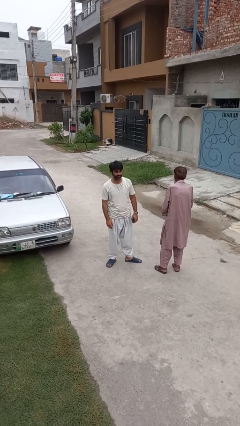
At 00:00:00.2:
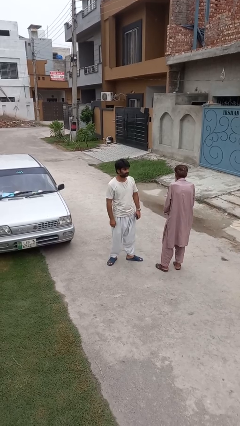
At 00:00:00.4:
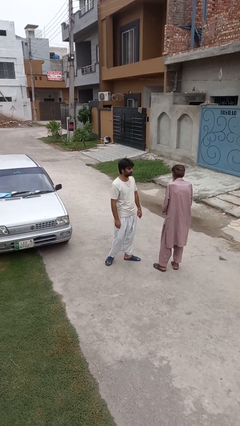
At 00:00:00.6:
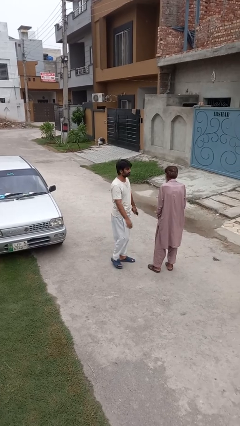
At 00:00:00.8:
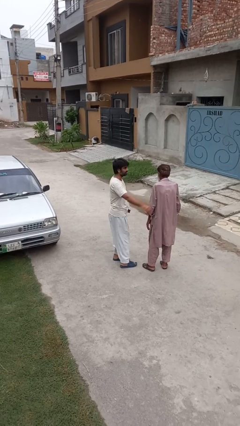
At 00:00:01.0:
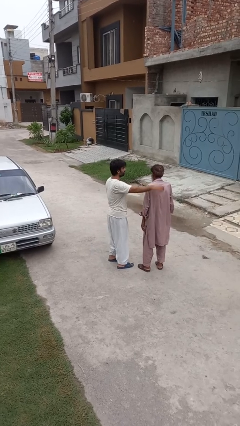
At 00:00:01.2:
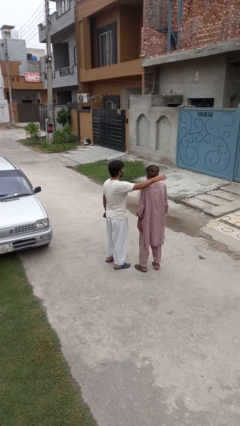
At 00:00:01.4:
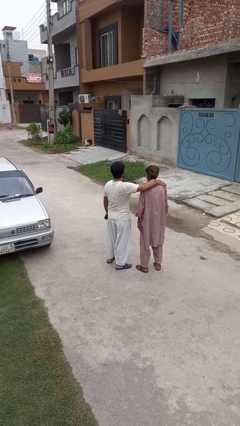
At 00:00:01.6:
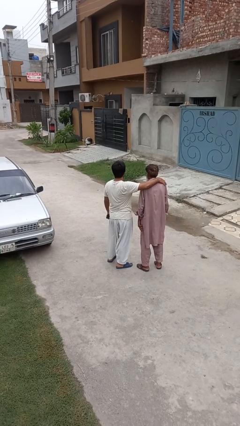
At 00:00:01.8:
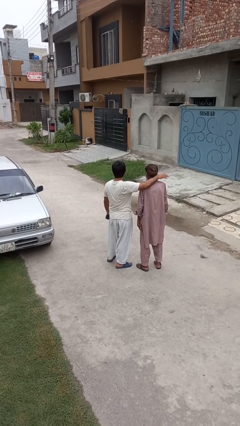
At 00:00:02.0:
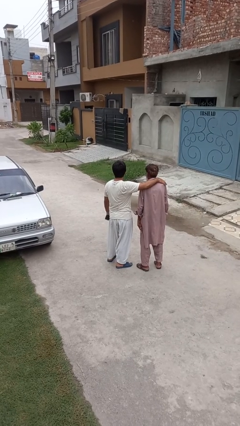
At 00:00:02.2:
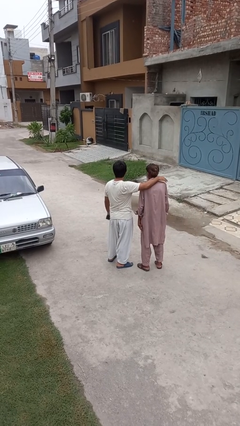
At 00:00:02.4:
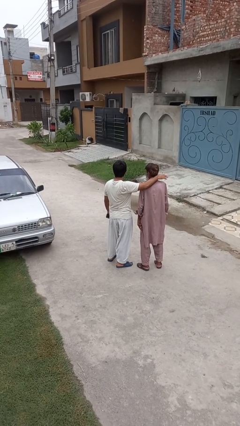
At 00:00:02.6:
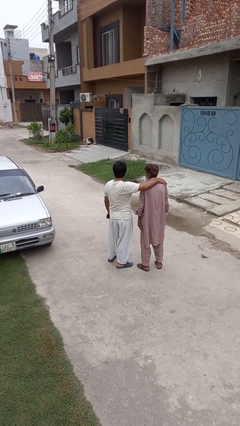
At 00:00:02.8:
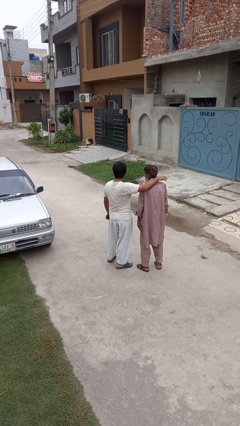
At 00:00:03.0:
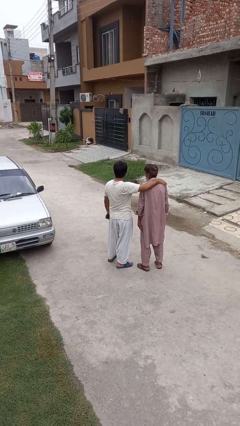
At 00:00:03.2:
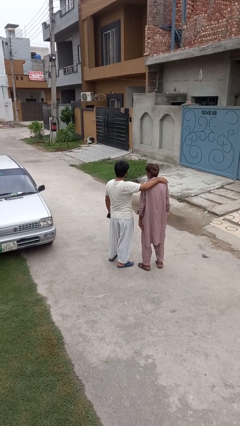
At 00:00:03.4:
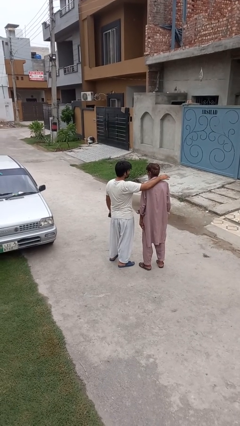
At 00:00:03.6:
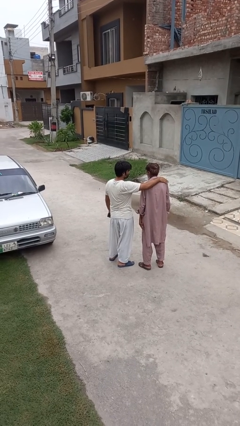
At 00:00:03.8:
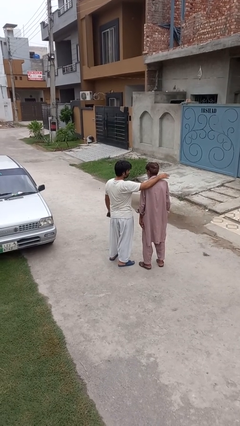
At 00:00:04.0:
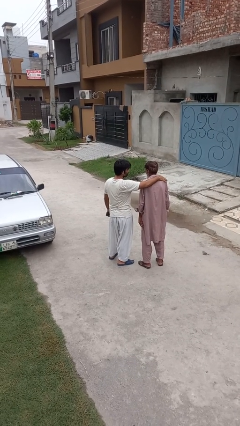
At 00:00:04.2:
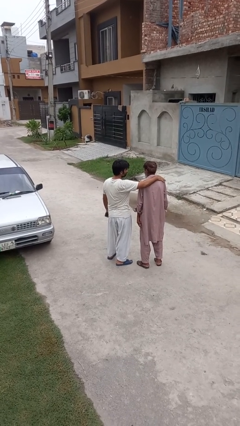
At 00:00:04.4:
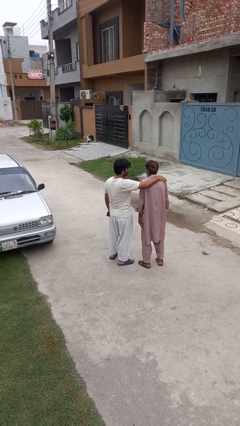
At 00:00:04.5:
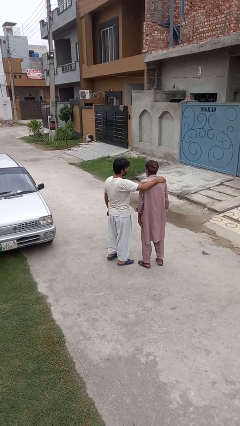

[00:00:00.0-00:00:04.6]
person pounds shoulders of person

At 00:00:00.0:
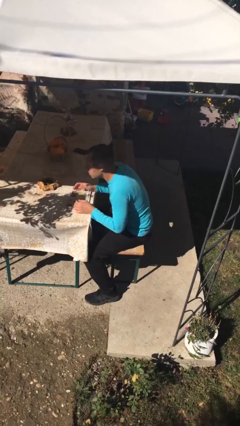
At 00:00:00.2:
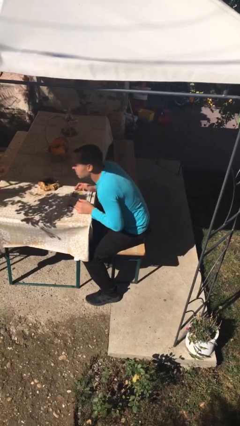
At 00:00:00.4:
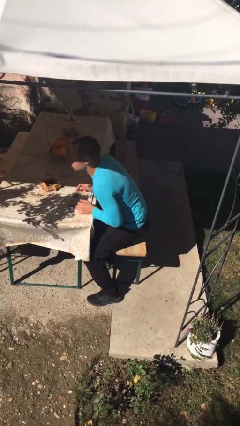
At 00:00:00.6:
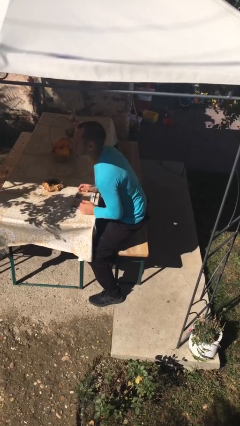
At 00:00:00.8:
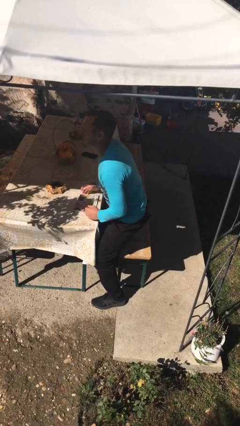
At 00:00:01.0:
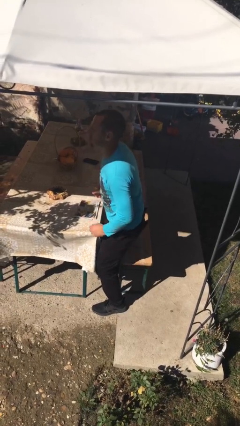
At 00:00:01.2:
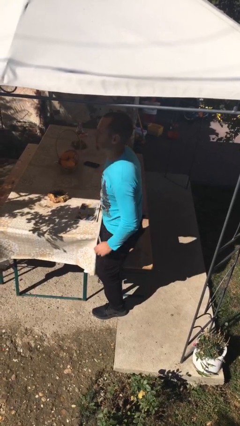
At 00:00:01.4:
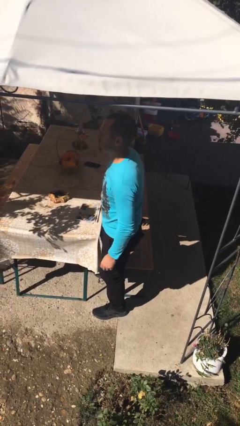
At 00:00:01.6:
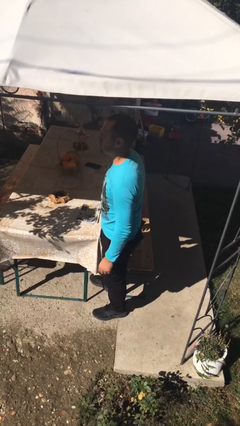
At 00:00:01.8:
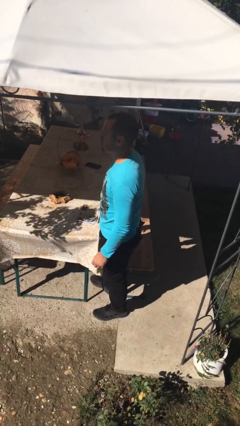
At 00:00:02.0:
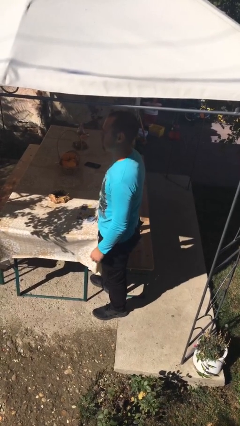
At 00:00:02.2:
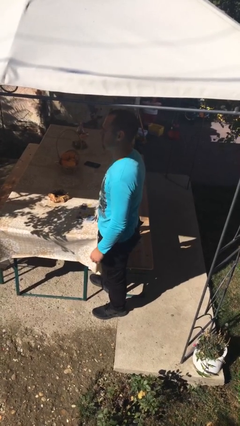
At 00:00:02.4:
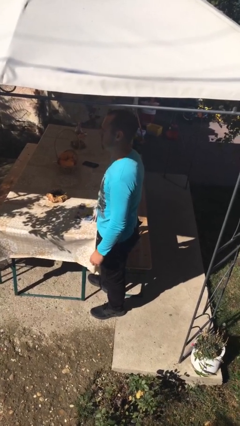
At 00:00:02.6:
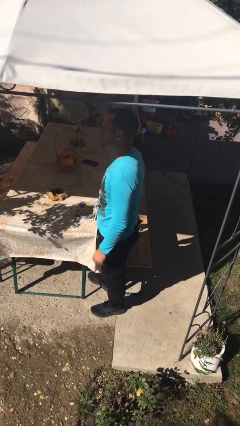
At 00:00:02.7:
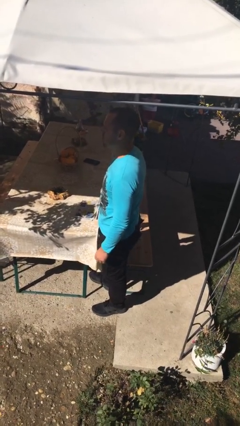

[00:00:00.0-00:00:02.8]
person stands up

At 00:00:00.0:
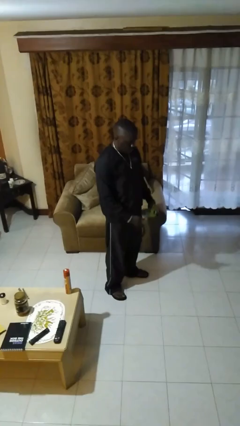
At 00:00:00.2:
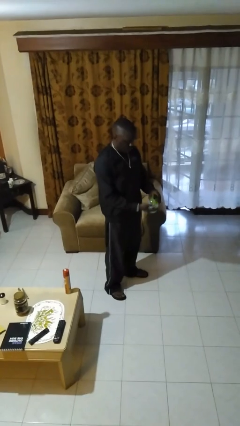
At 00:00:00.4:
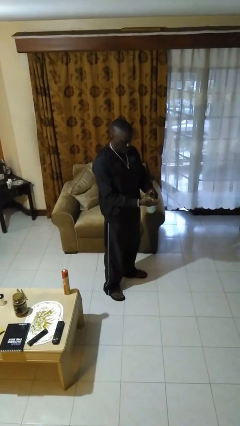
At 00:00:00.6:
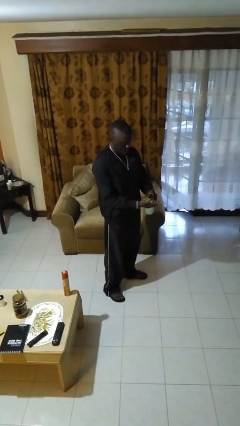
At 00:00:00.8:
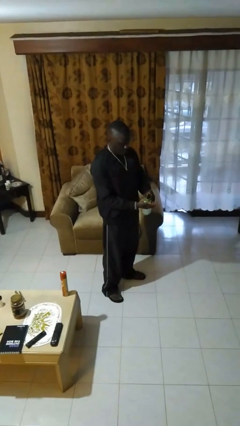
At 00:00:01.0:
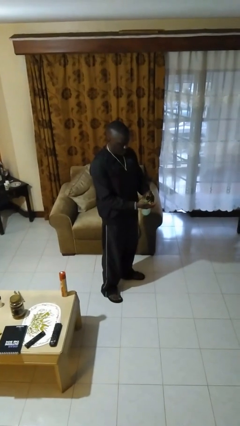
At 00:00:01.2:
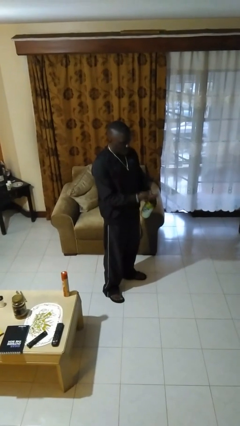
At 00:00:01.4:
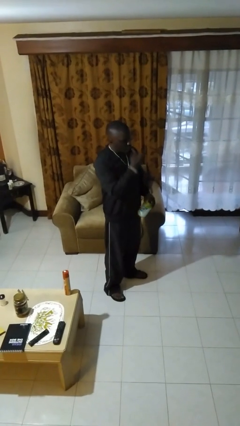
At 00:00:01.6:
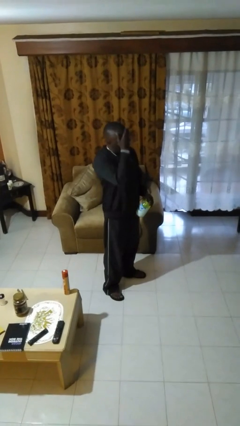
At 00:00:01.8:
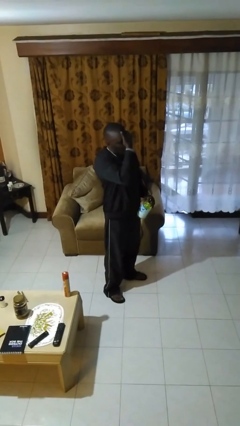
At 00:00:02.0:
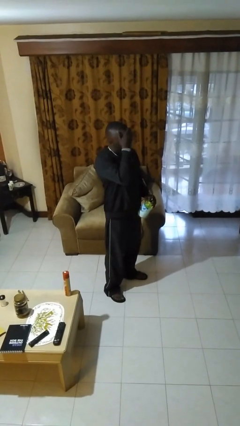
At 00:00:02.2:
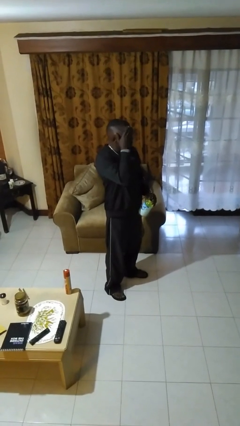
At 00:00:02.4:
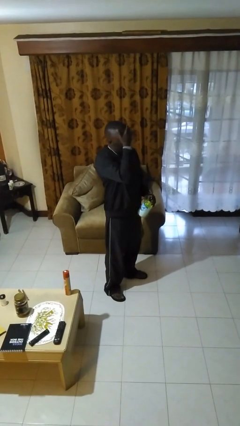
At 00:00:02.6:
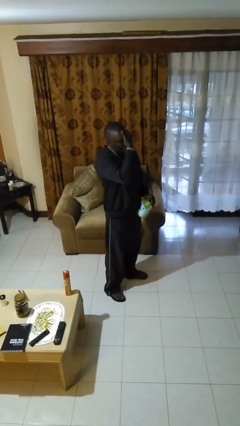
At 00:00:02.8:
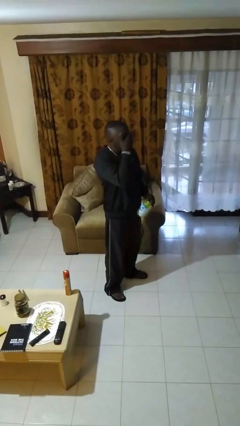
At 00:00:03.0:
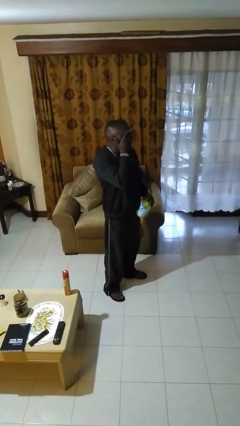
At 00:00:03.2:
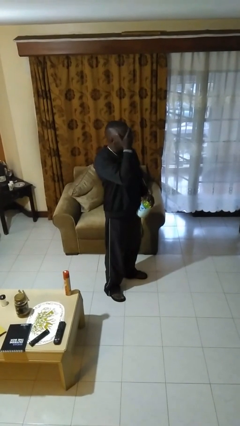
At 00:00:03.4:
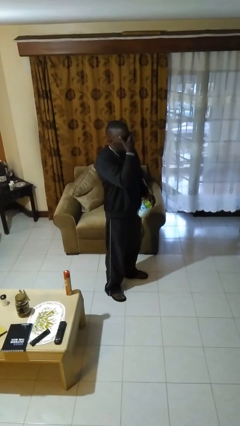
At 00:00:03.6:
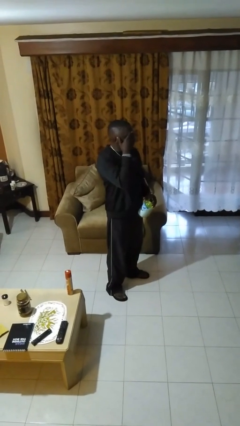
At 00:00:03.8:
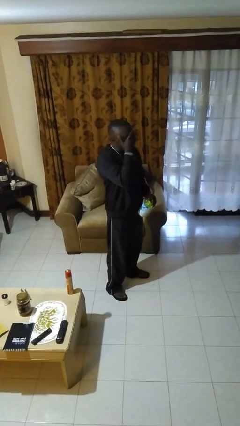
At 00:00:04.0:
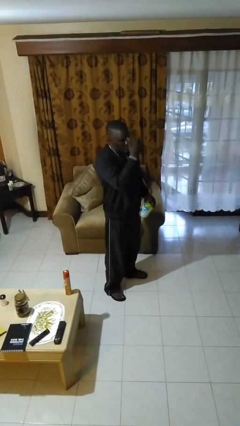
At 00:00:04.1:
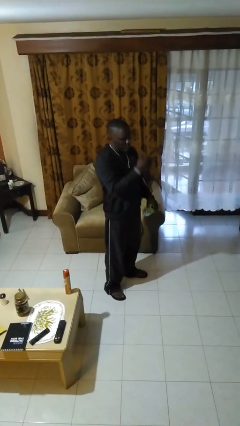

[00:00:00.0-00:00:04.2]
person applies facial moisturizer

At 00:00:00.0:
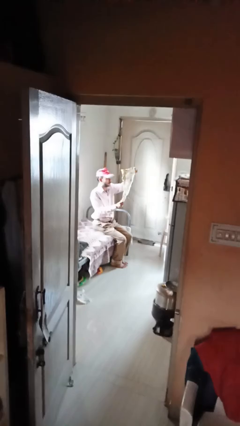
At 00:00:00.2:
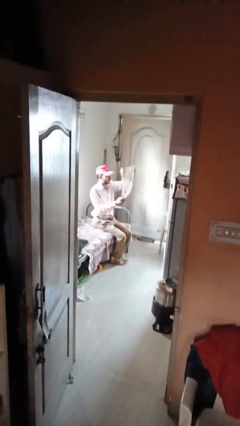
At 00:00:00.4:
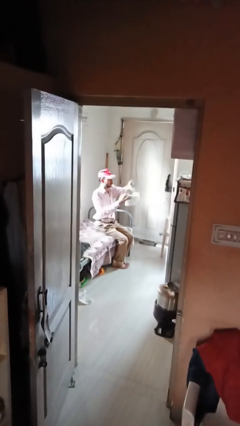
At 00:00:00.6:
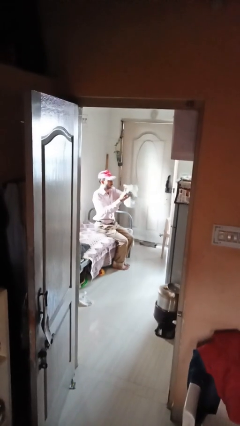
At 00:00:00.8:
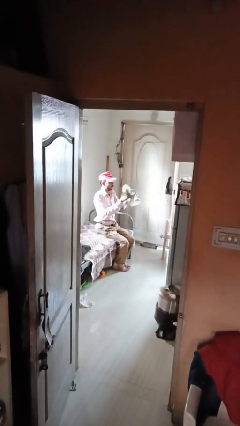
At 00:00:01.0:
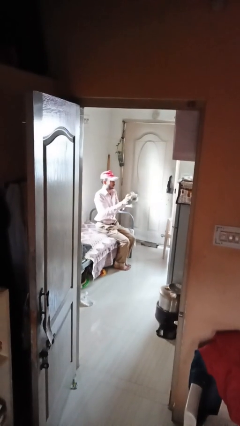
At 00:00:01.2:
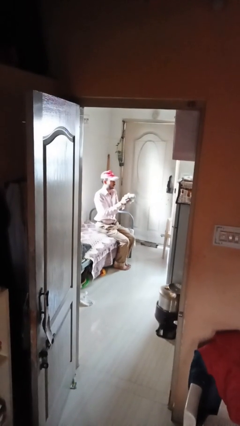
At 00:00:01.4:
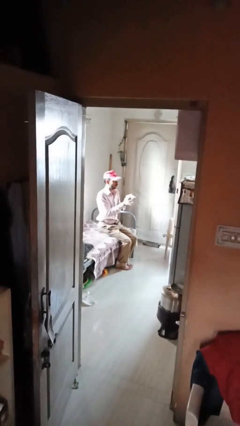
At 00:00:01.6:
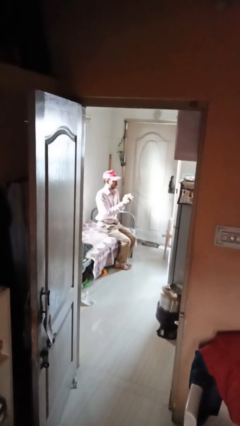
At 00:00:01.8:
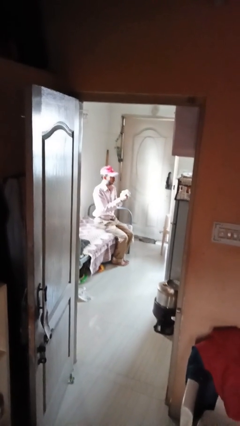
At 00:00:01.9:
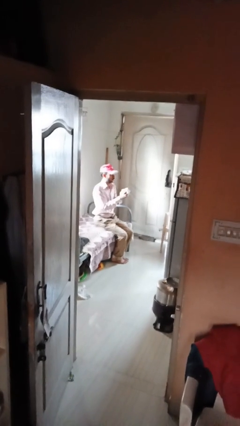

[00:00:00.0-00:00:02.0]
person crumples paper

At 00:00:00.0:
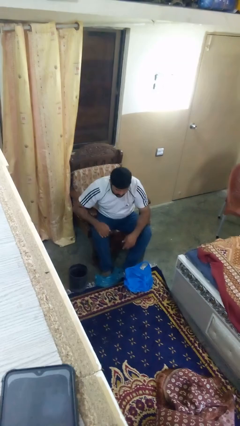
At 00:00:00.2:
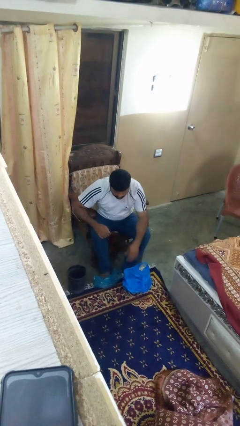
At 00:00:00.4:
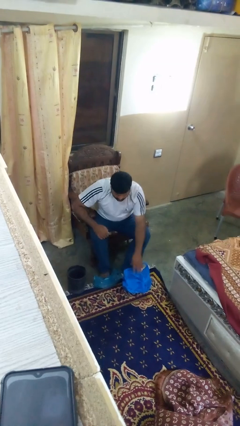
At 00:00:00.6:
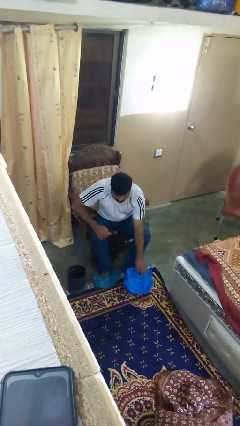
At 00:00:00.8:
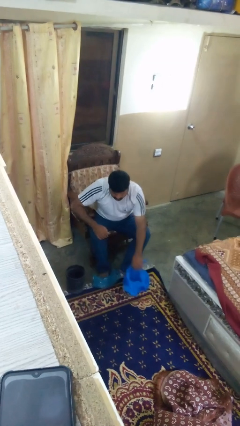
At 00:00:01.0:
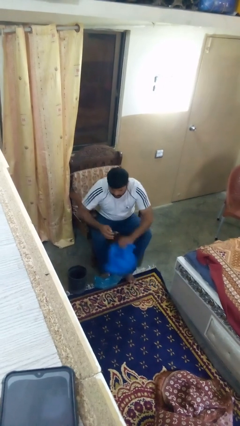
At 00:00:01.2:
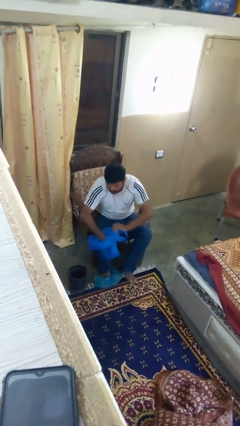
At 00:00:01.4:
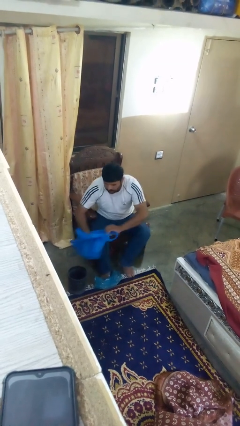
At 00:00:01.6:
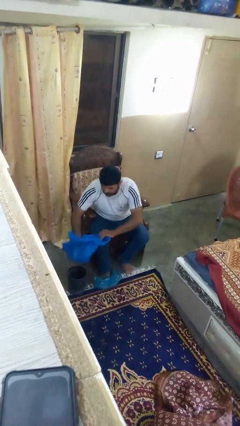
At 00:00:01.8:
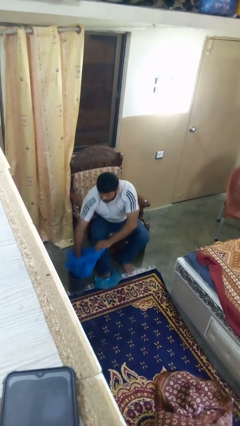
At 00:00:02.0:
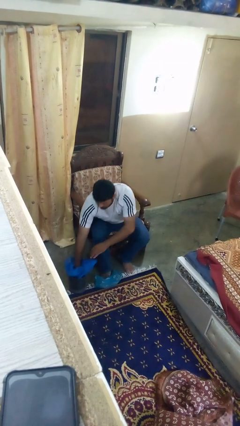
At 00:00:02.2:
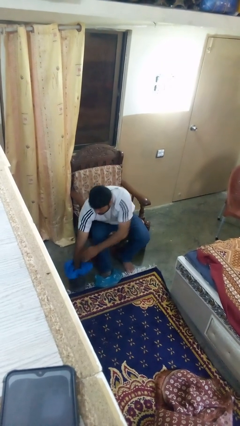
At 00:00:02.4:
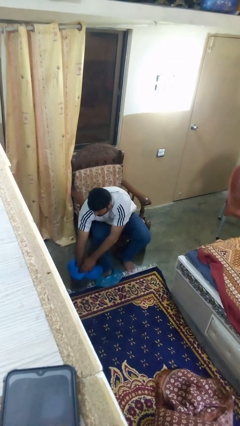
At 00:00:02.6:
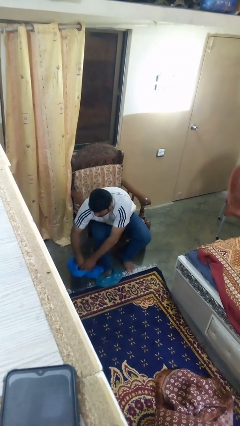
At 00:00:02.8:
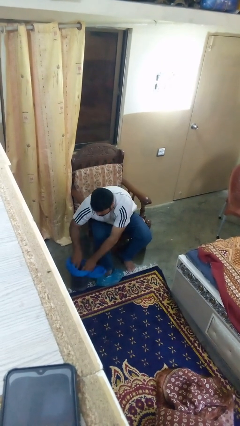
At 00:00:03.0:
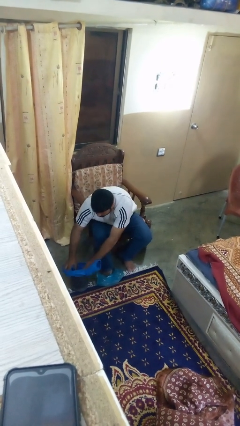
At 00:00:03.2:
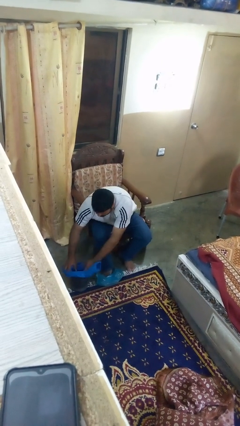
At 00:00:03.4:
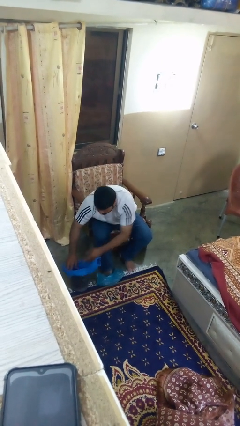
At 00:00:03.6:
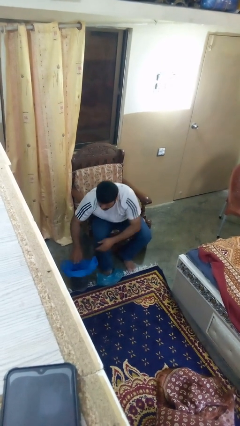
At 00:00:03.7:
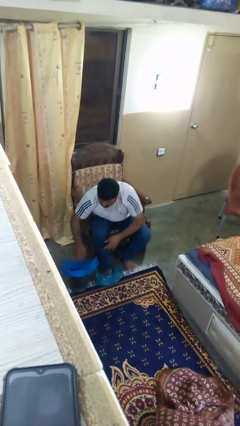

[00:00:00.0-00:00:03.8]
person inserts trashbag into trashcan

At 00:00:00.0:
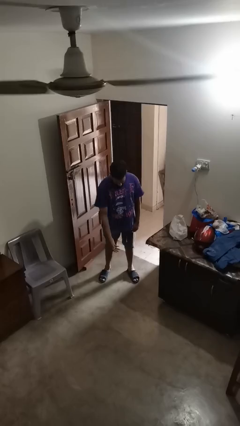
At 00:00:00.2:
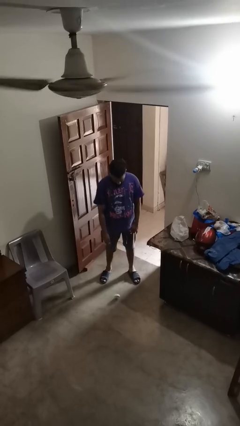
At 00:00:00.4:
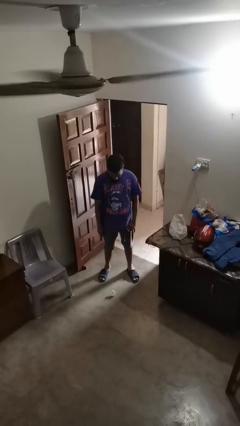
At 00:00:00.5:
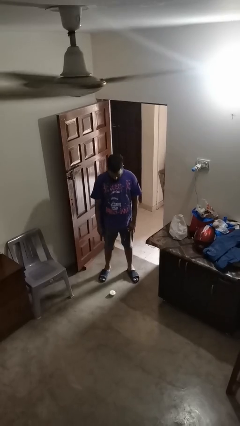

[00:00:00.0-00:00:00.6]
person catches dropped object
